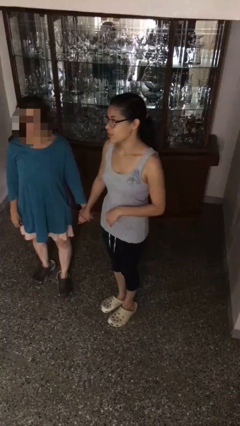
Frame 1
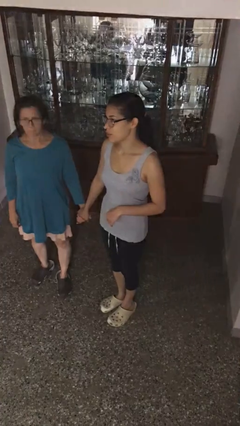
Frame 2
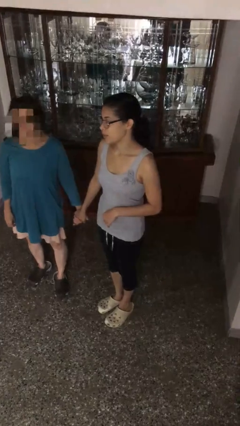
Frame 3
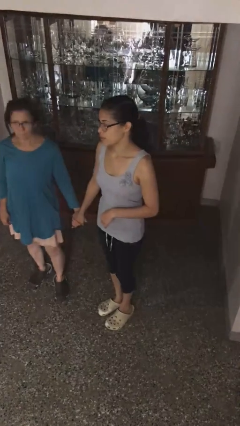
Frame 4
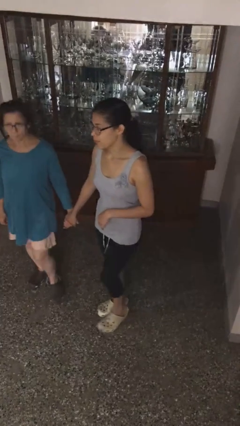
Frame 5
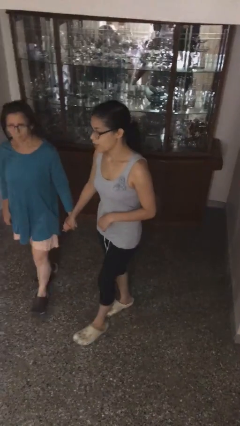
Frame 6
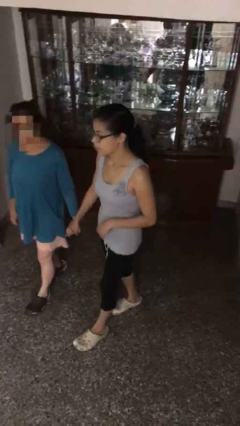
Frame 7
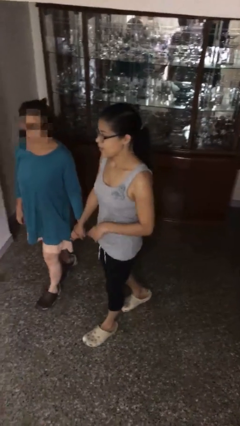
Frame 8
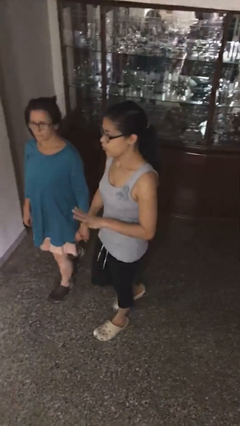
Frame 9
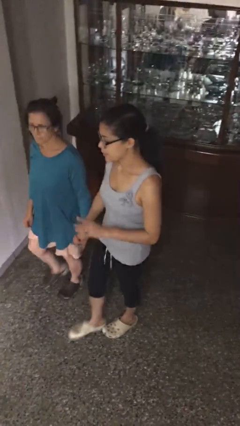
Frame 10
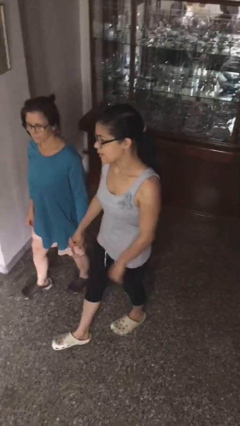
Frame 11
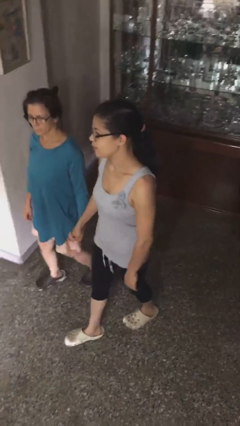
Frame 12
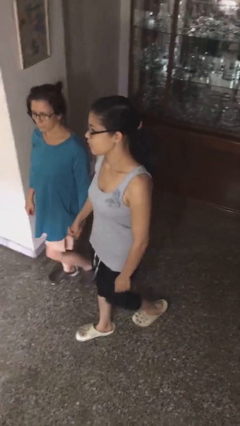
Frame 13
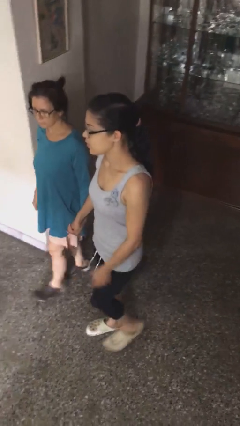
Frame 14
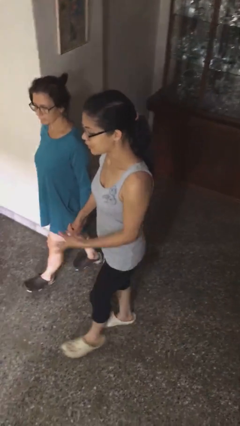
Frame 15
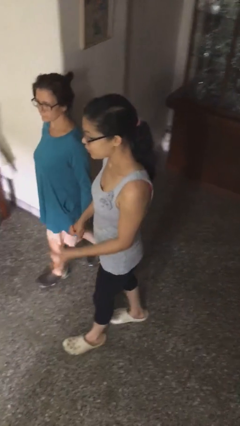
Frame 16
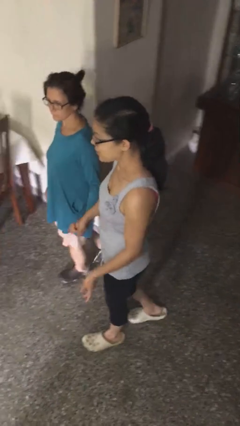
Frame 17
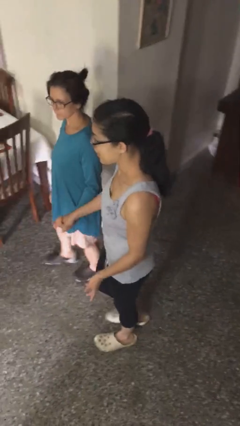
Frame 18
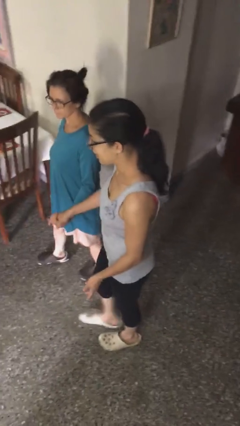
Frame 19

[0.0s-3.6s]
person holds hand

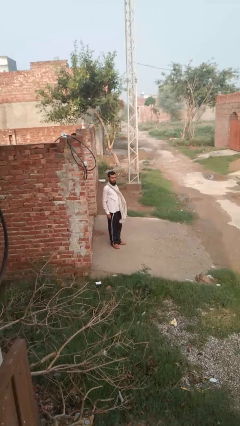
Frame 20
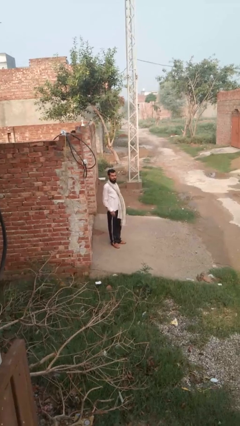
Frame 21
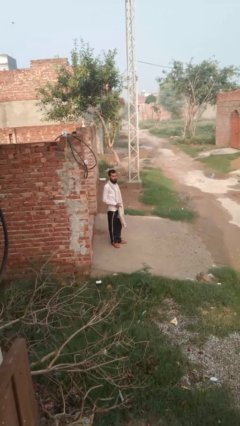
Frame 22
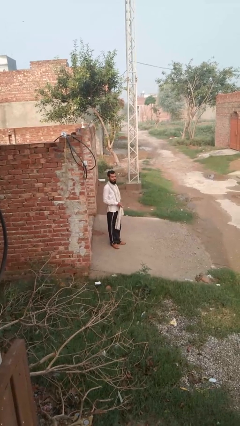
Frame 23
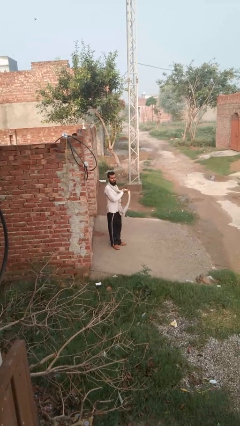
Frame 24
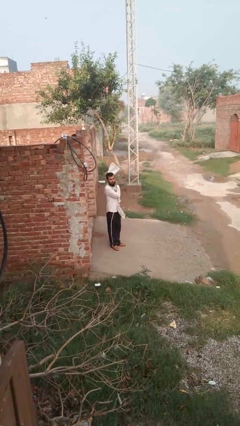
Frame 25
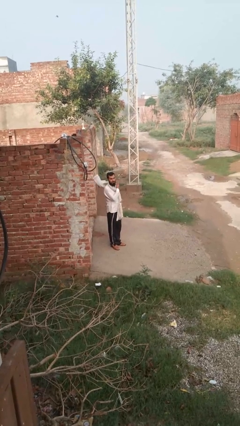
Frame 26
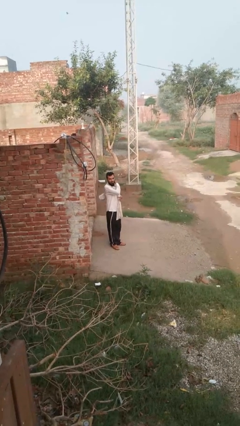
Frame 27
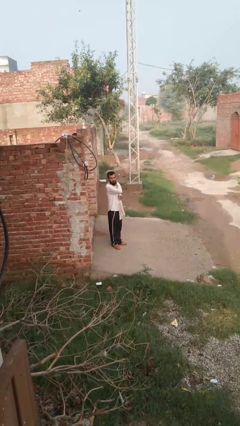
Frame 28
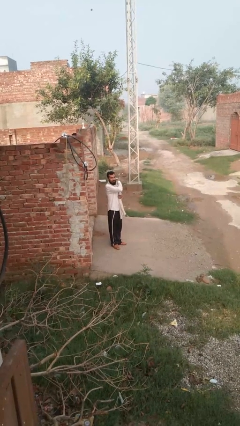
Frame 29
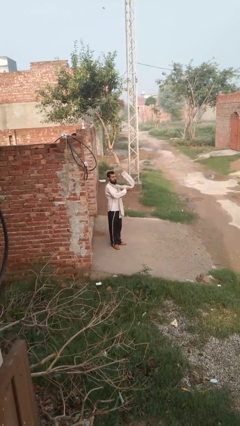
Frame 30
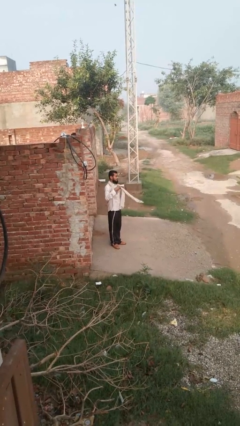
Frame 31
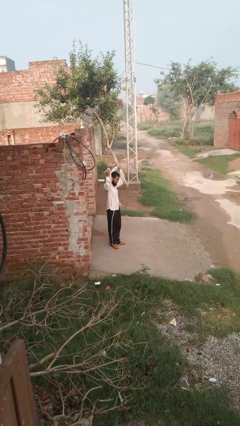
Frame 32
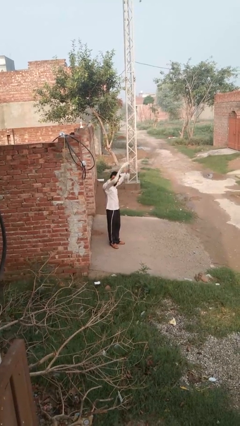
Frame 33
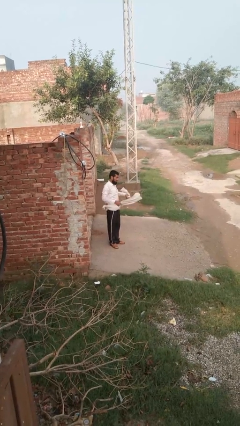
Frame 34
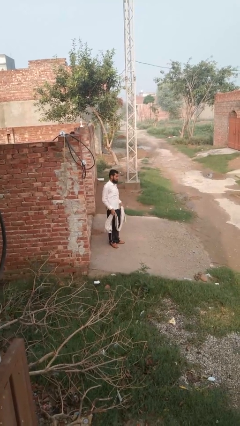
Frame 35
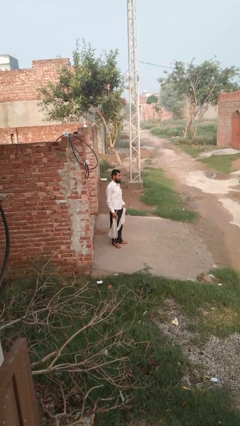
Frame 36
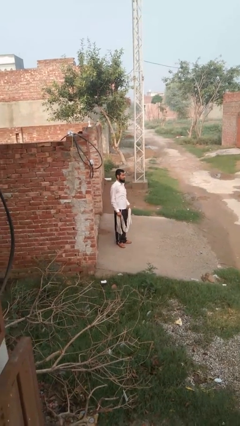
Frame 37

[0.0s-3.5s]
person takes off scarf

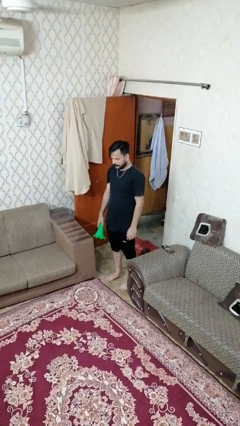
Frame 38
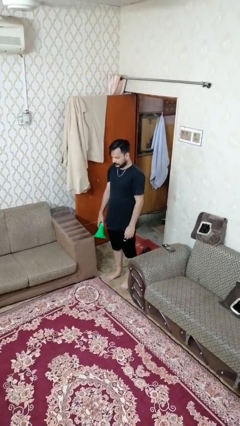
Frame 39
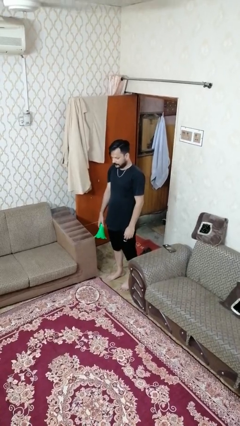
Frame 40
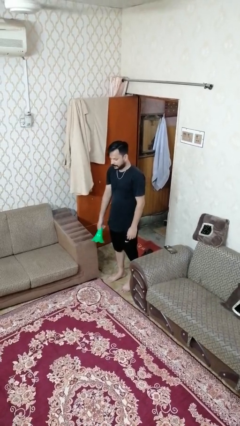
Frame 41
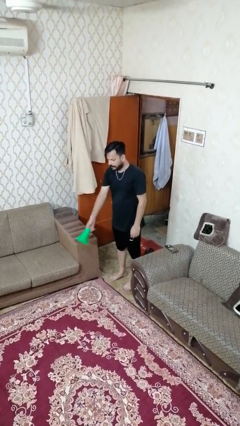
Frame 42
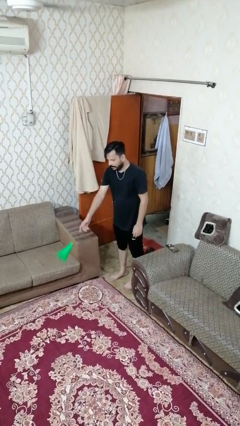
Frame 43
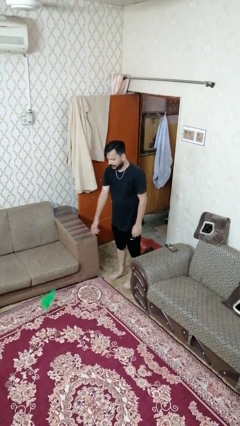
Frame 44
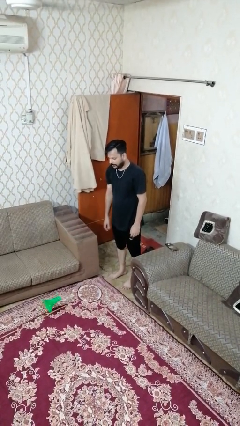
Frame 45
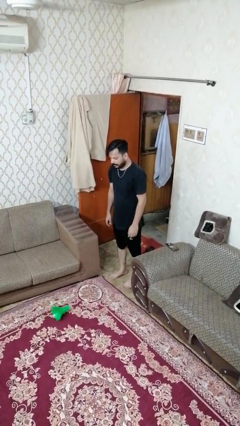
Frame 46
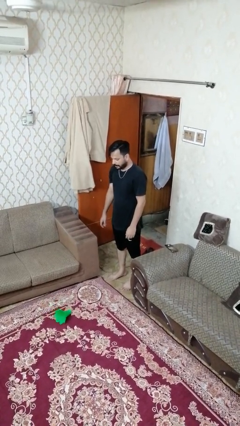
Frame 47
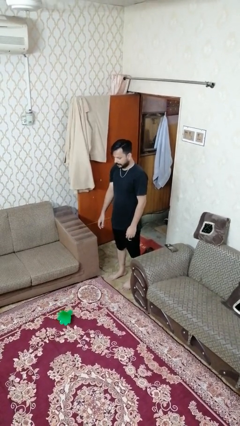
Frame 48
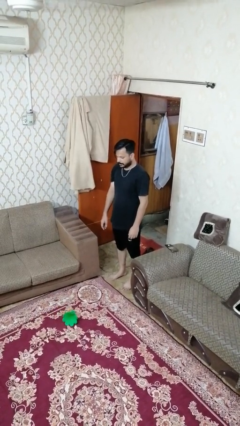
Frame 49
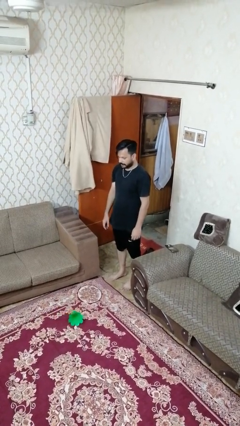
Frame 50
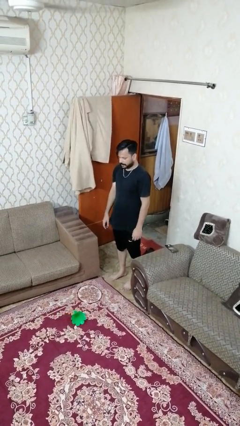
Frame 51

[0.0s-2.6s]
person throws object to ground

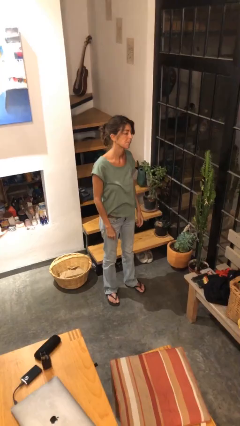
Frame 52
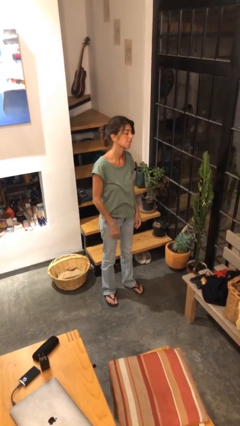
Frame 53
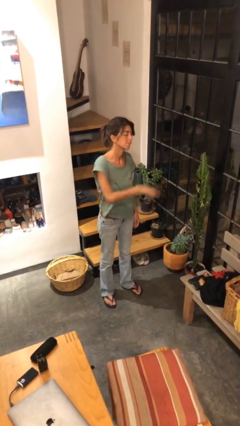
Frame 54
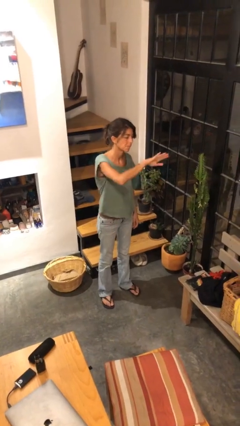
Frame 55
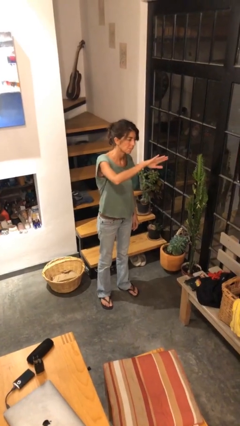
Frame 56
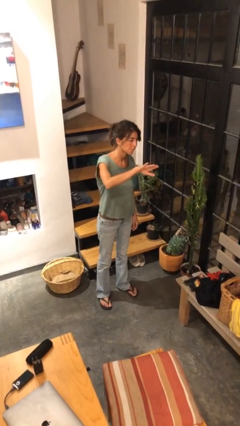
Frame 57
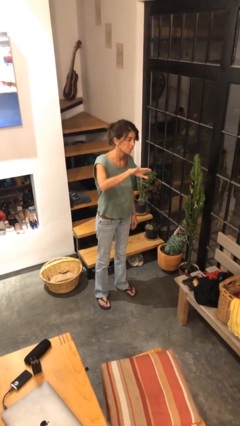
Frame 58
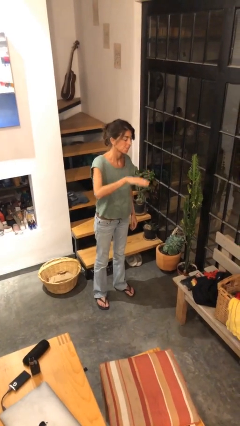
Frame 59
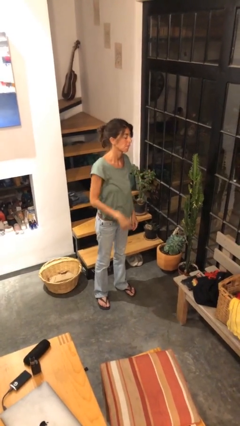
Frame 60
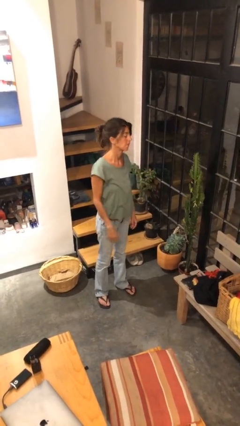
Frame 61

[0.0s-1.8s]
person gestures swipe right

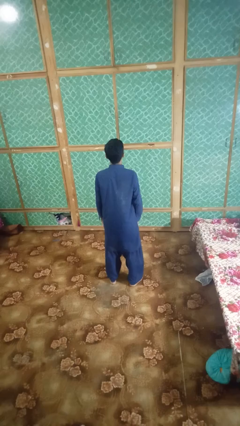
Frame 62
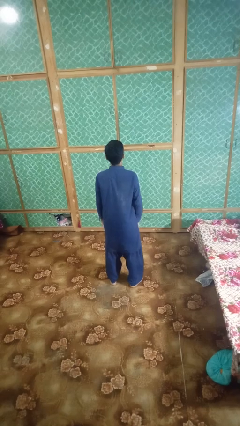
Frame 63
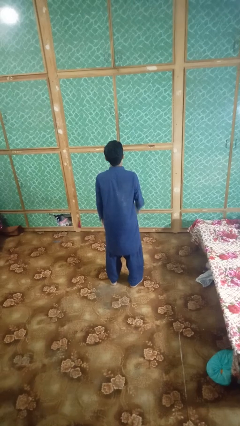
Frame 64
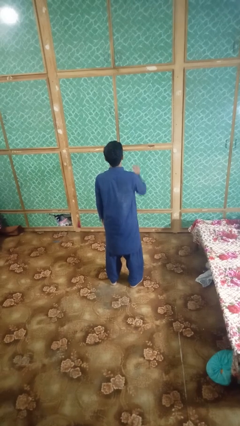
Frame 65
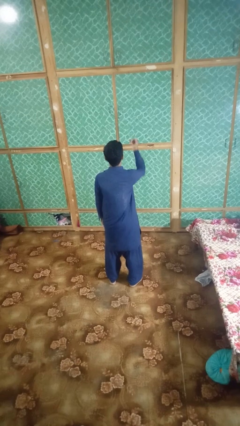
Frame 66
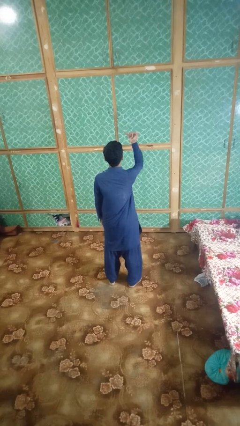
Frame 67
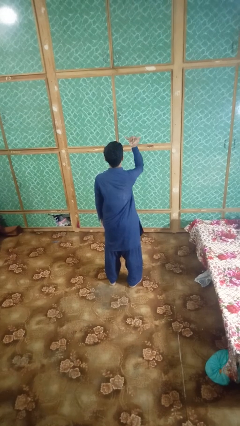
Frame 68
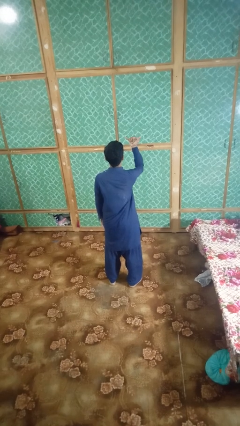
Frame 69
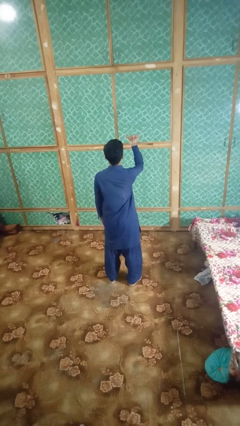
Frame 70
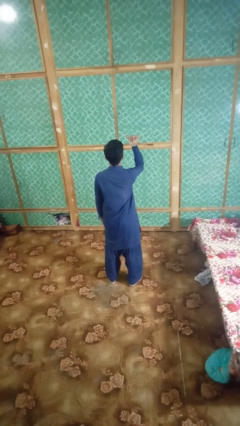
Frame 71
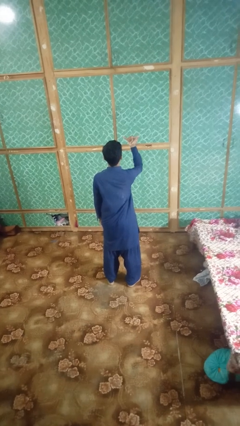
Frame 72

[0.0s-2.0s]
person gestures hang loose

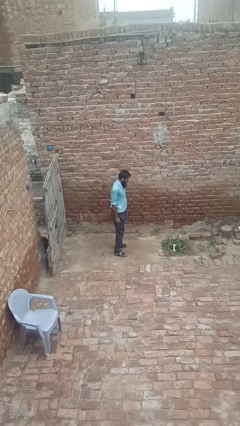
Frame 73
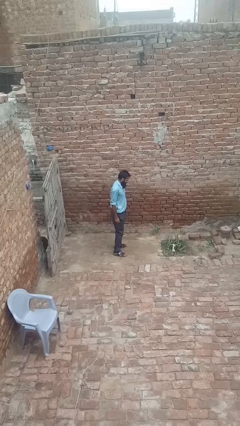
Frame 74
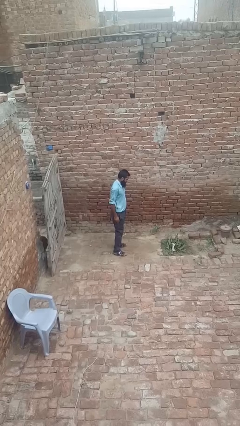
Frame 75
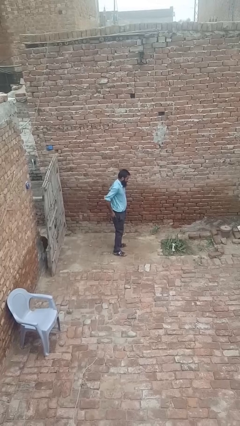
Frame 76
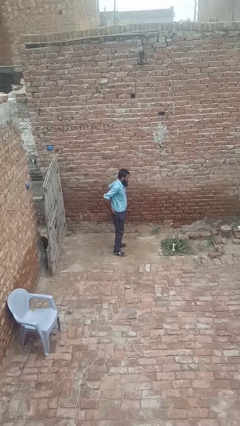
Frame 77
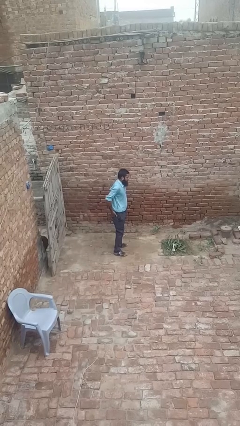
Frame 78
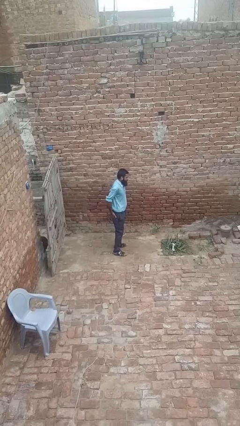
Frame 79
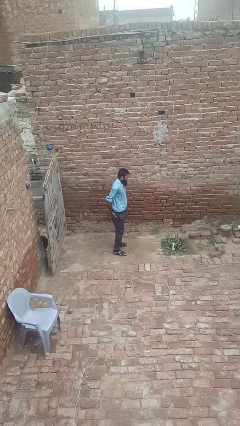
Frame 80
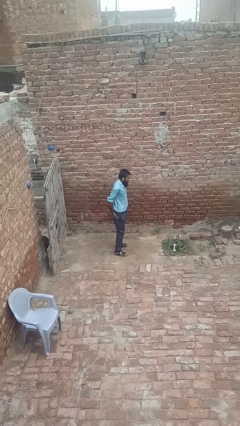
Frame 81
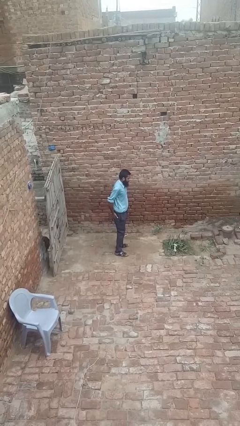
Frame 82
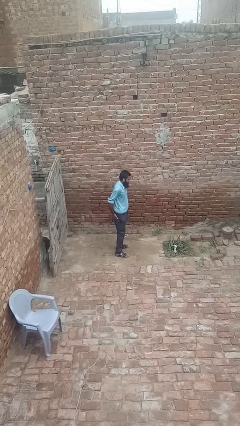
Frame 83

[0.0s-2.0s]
person puts hands in back pockets

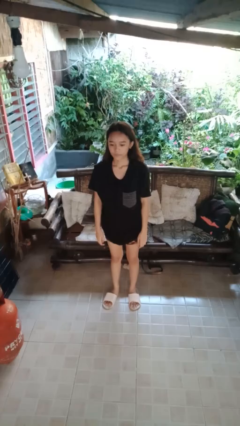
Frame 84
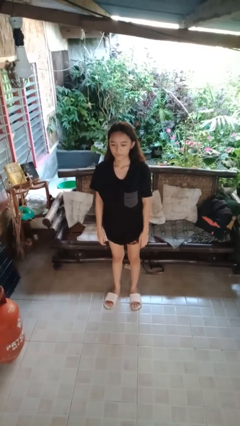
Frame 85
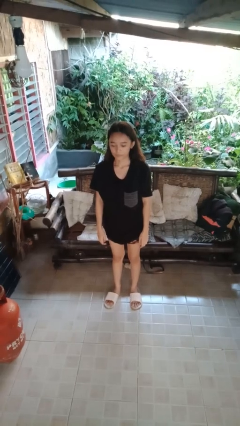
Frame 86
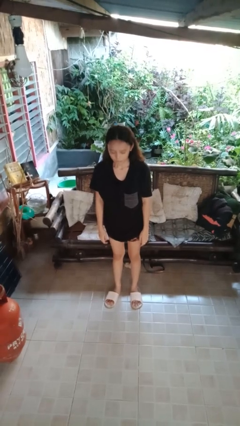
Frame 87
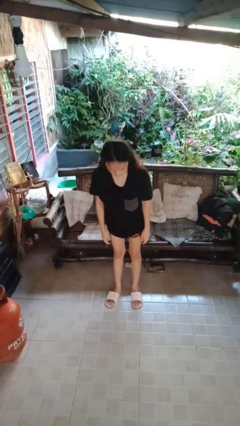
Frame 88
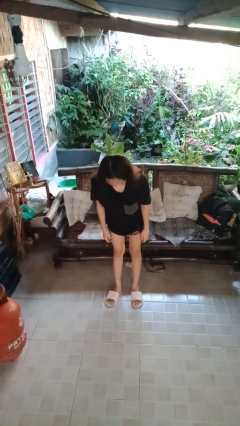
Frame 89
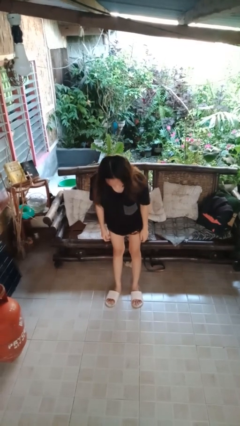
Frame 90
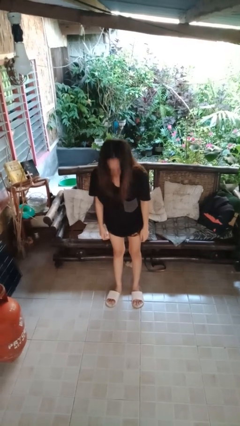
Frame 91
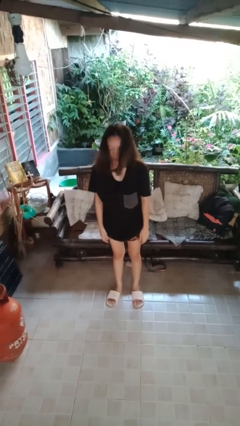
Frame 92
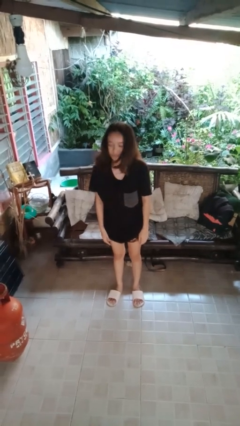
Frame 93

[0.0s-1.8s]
person bows

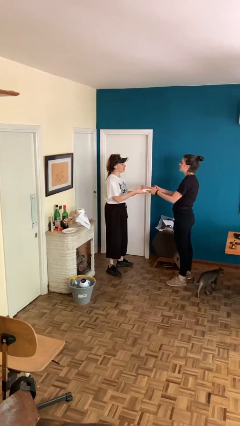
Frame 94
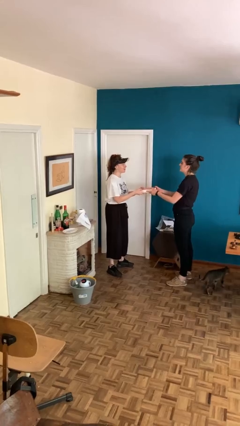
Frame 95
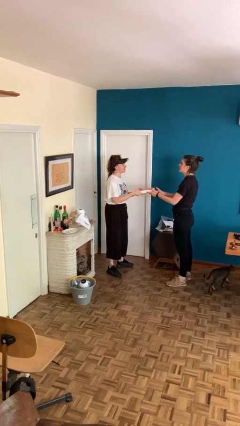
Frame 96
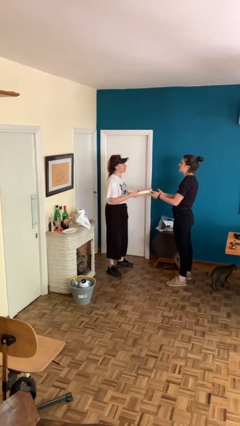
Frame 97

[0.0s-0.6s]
person transfers object to person
